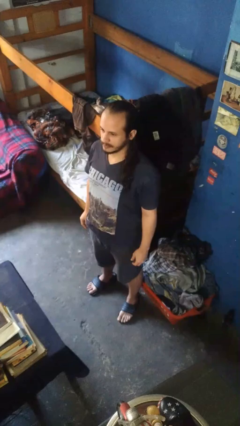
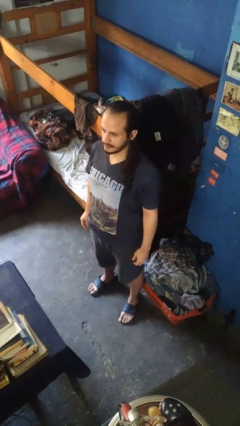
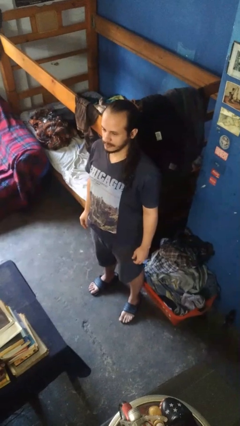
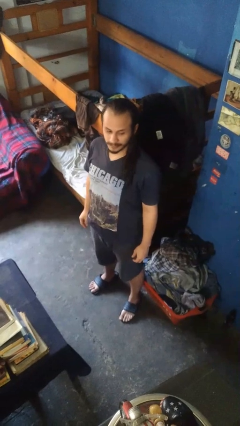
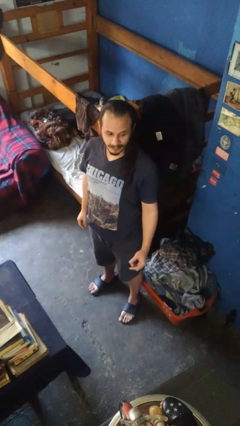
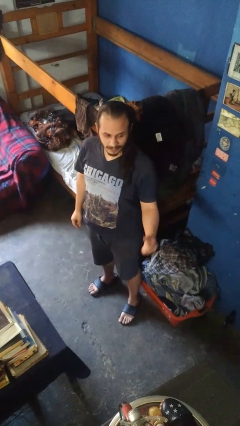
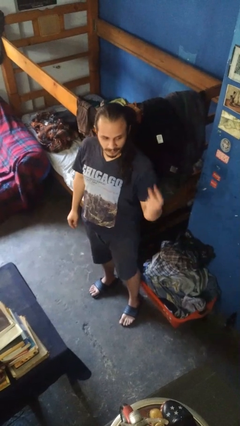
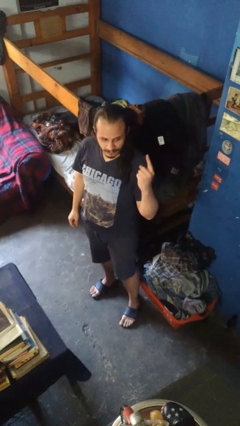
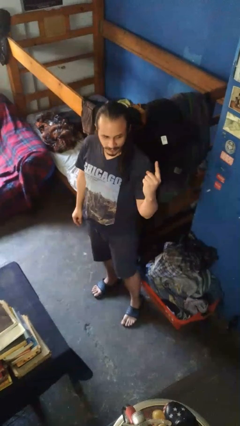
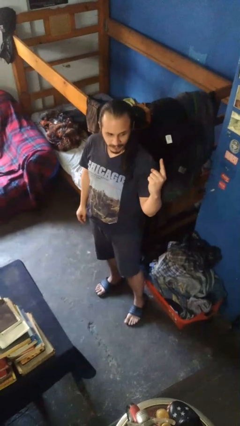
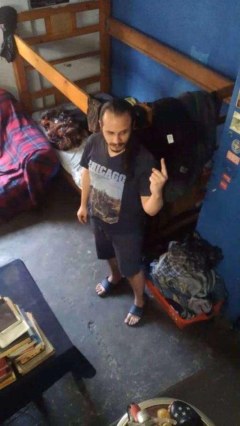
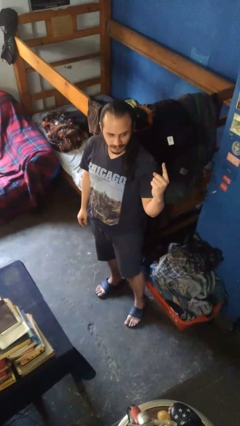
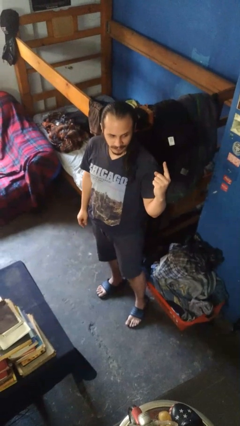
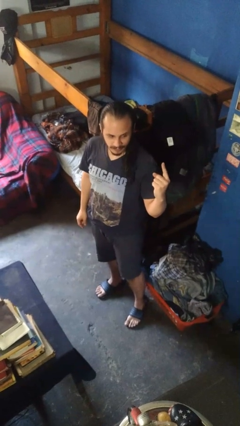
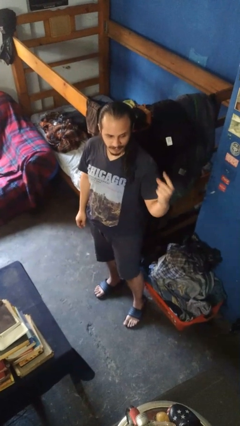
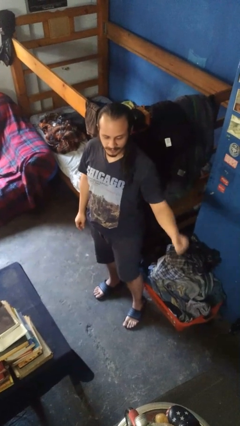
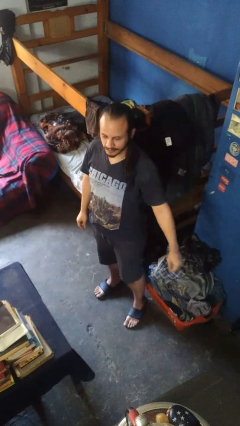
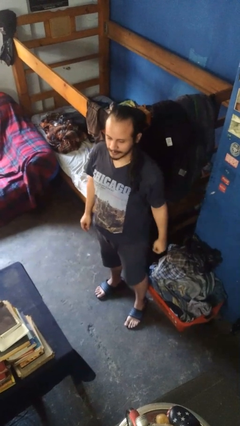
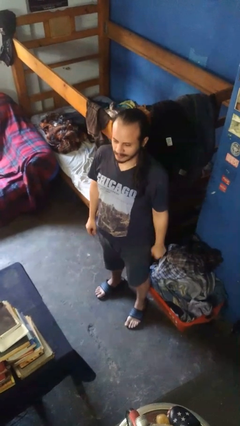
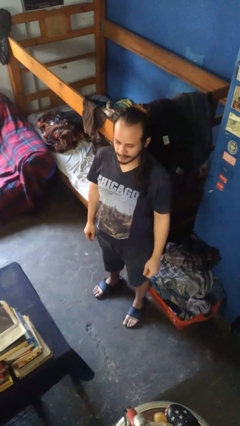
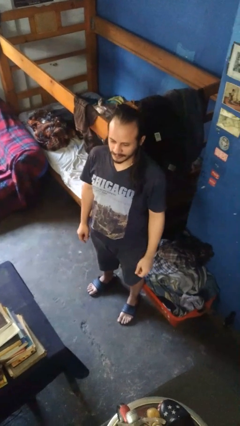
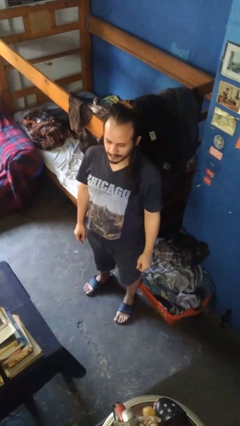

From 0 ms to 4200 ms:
person gestures number one

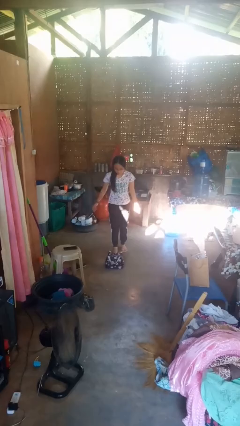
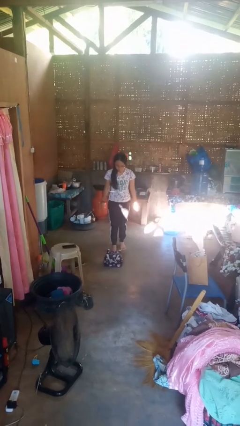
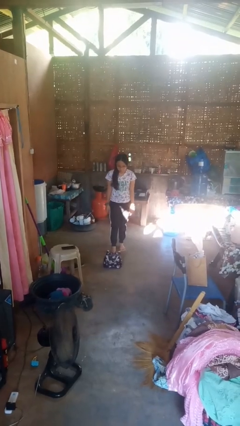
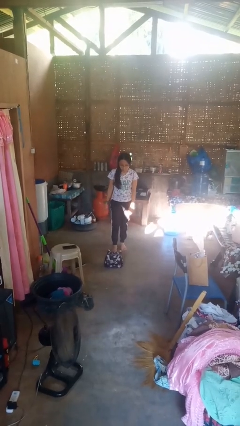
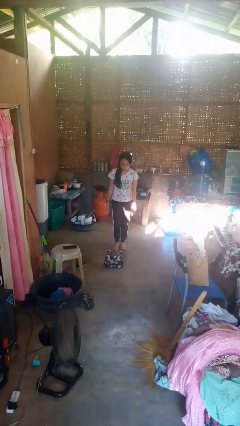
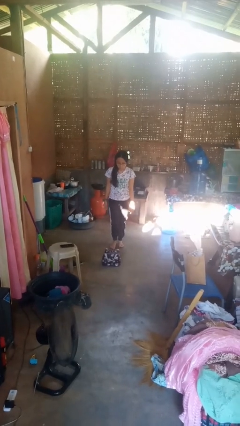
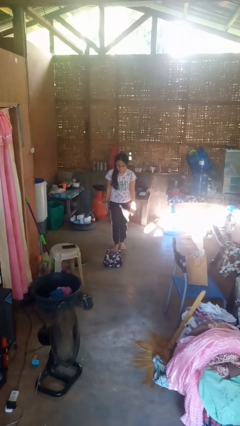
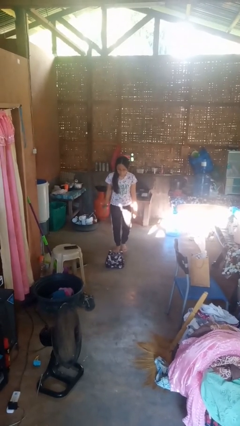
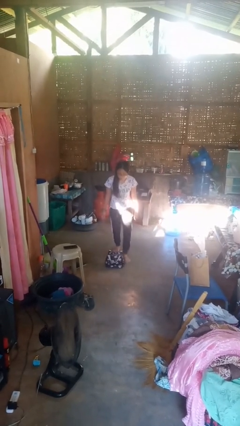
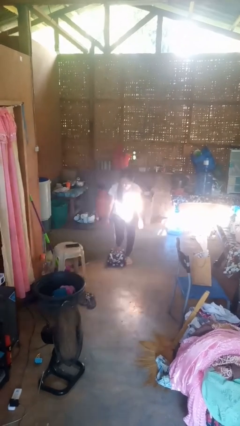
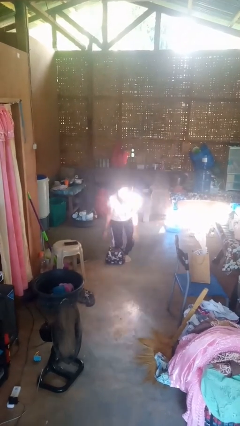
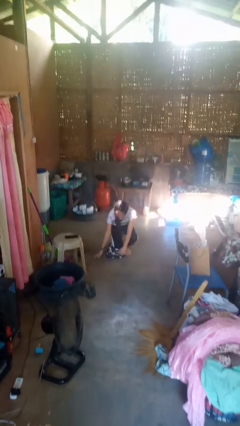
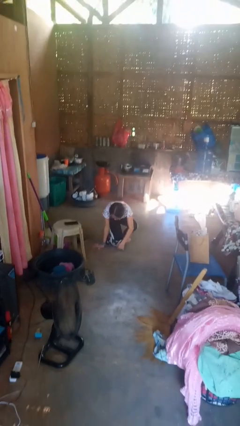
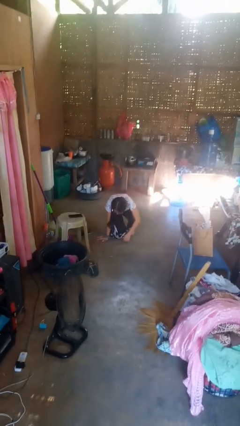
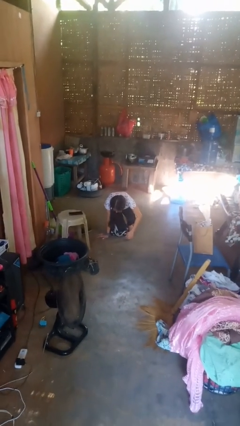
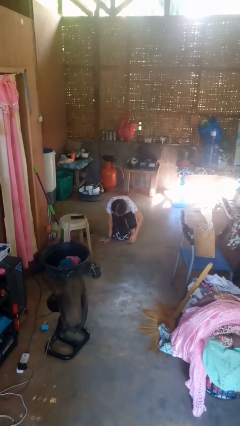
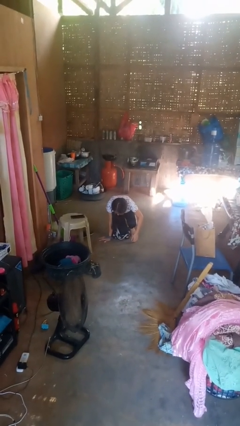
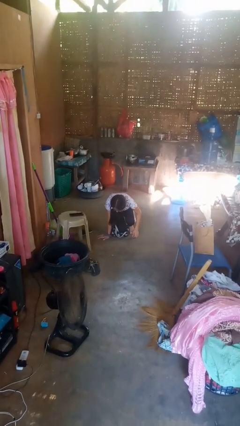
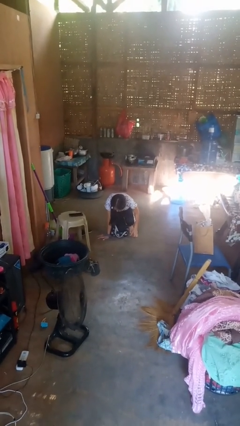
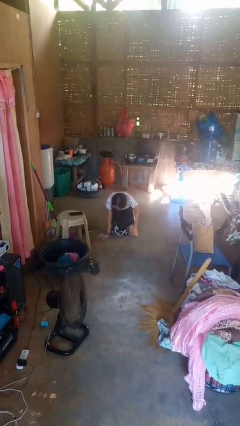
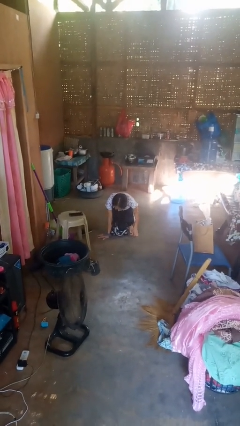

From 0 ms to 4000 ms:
person trips on object on floor

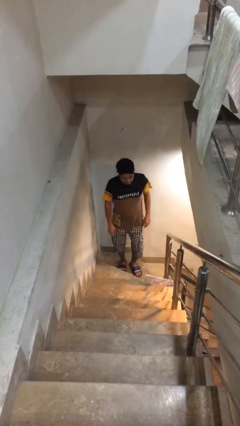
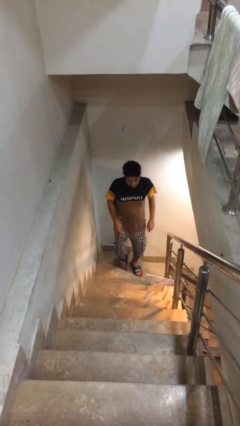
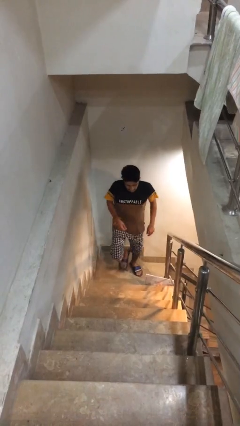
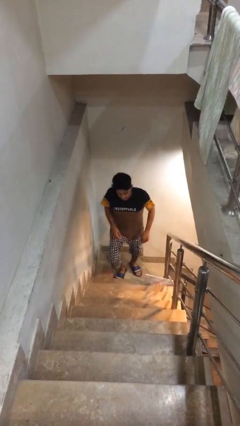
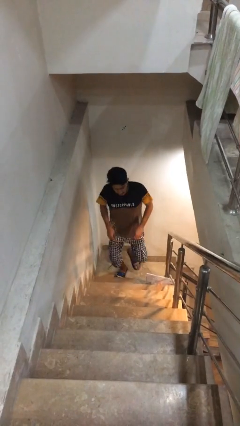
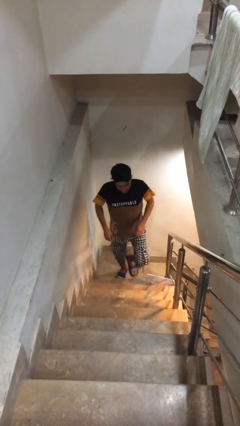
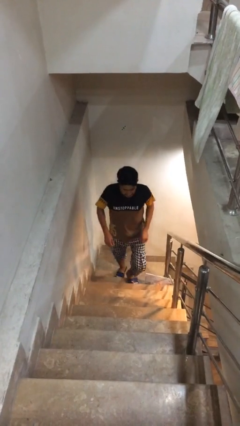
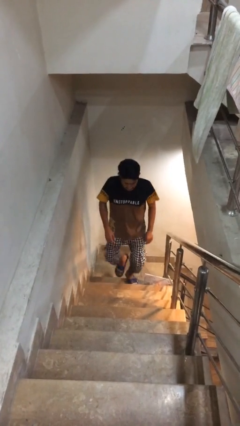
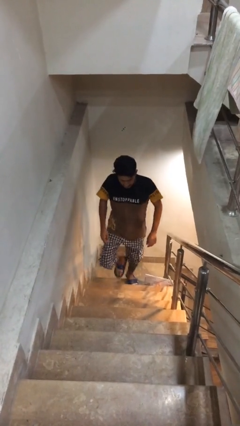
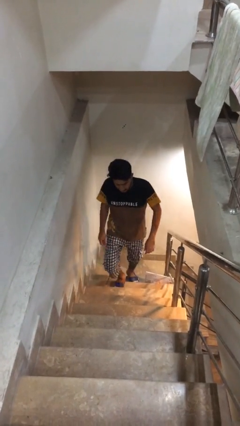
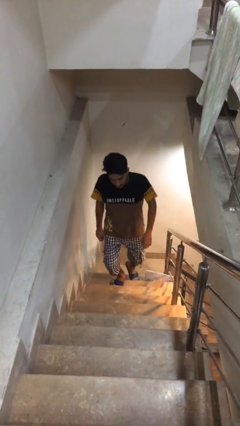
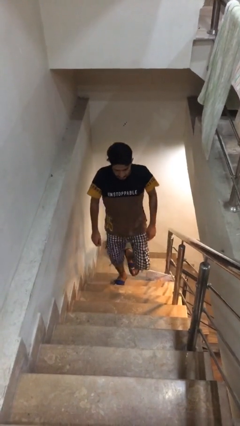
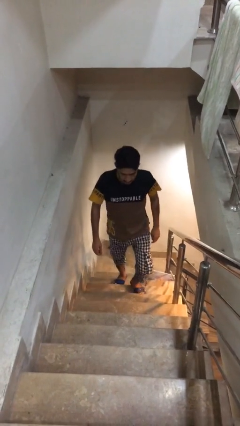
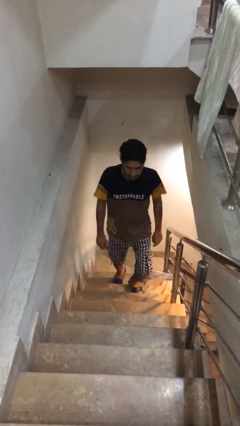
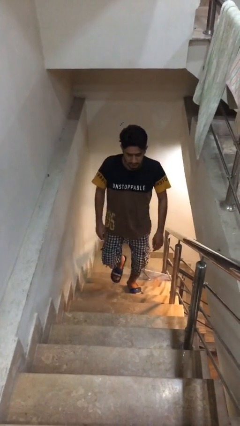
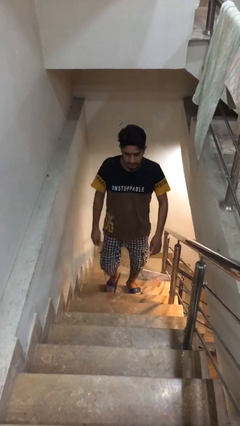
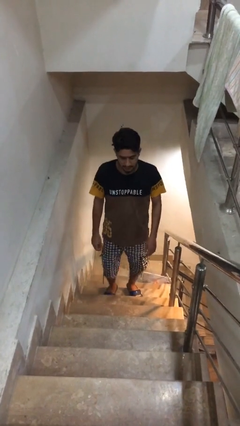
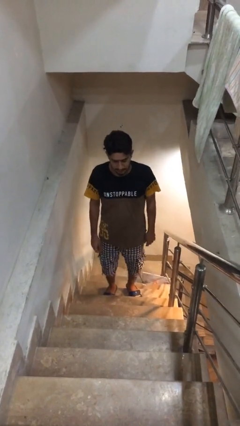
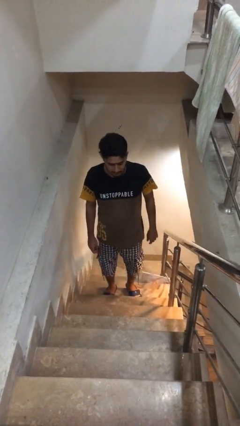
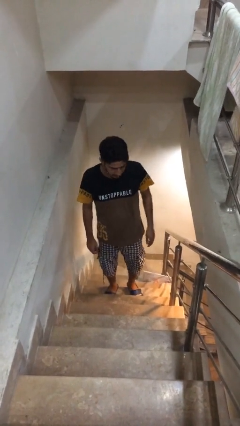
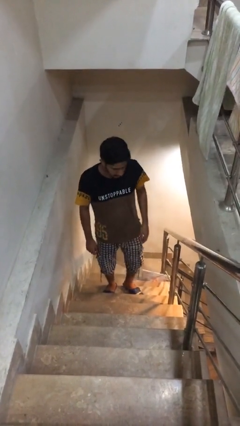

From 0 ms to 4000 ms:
person climbs up stairs

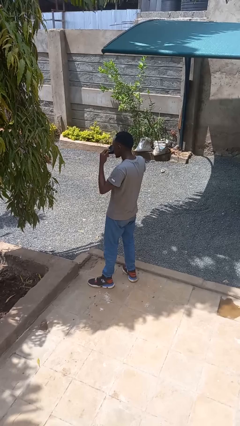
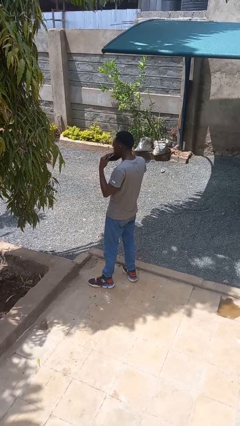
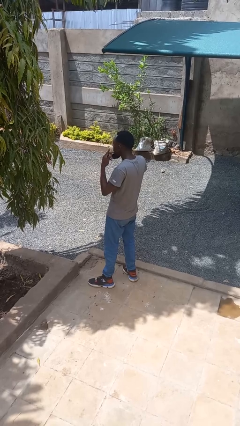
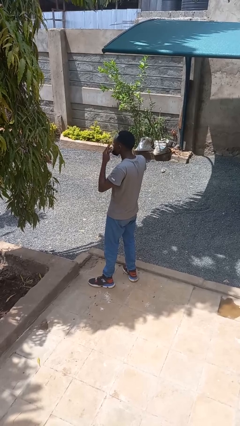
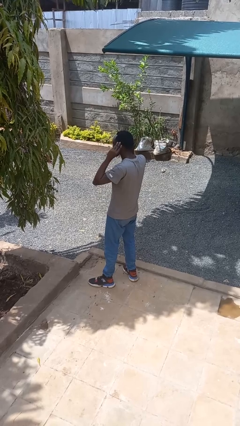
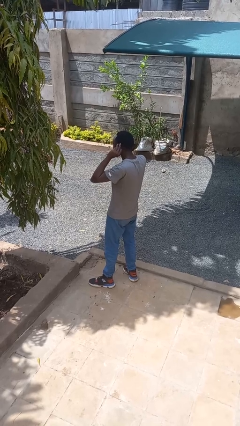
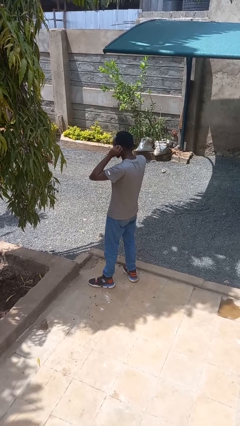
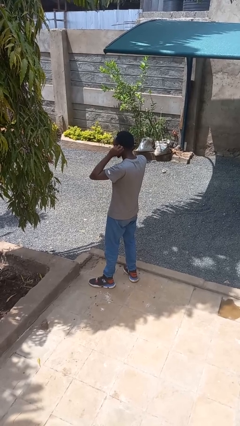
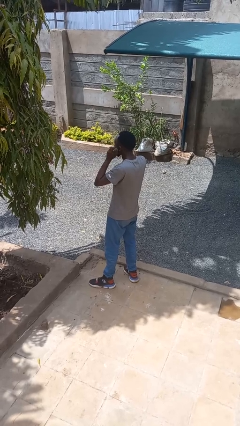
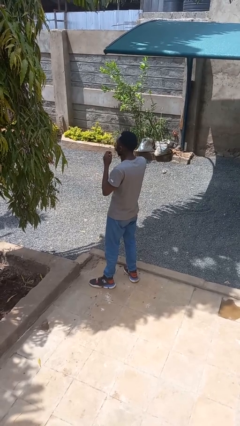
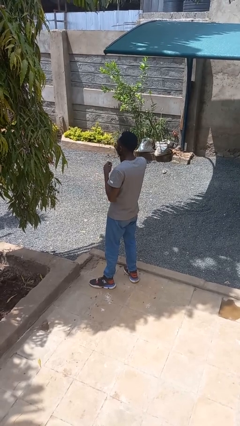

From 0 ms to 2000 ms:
person puts on facemask

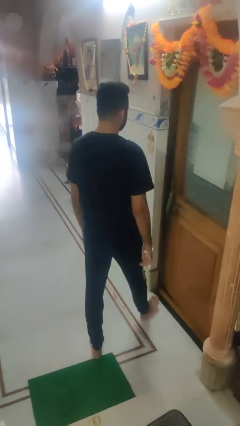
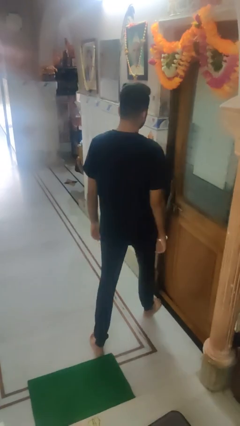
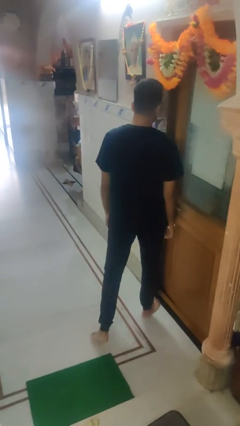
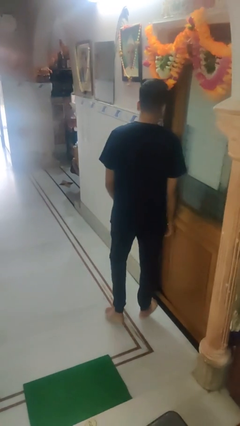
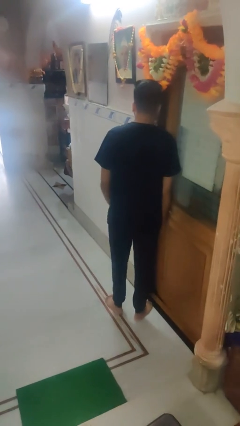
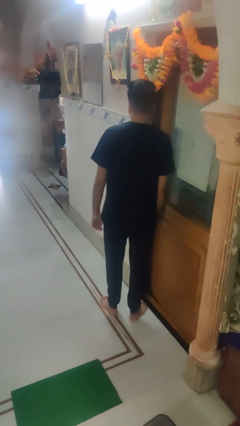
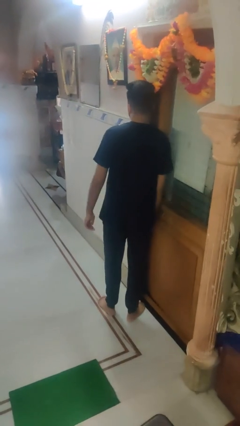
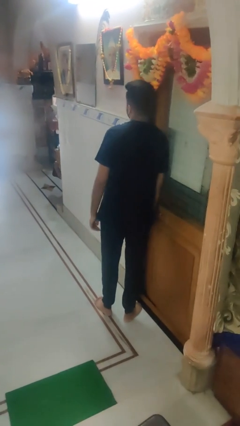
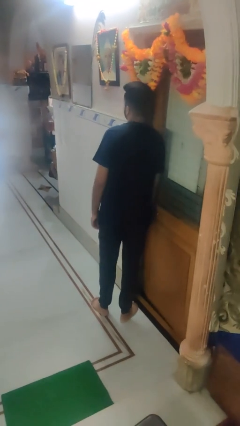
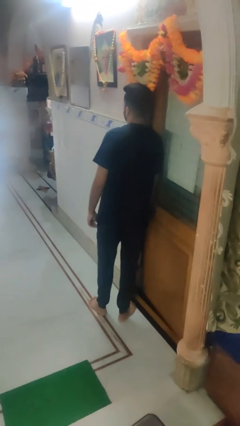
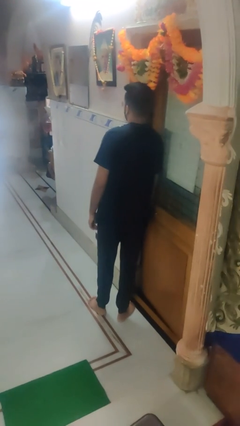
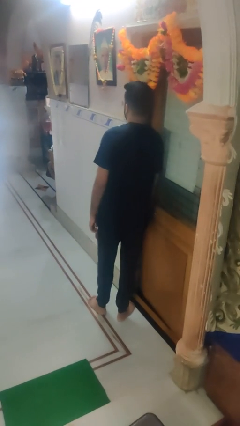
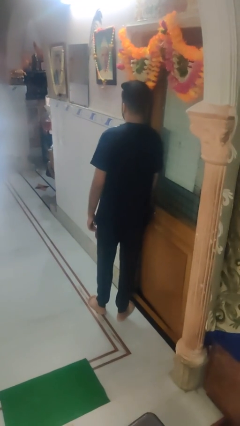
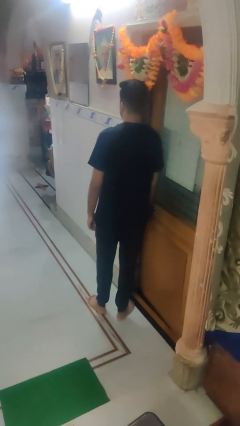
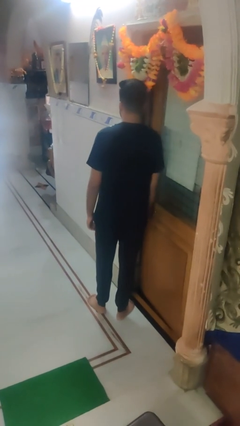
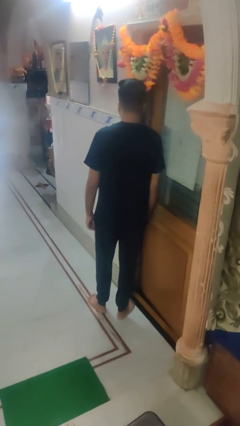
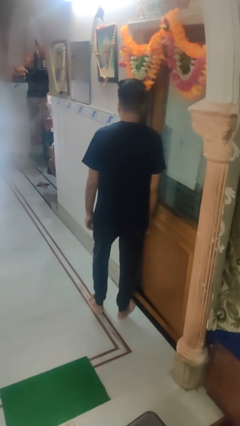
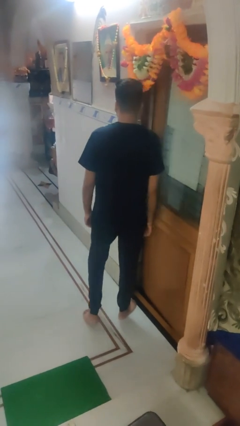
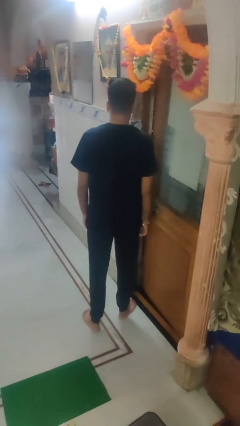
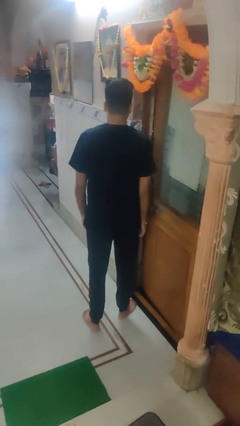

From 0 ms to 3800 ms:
person bumps into wall
